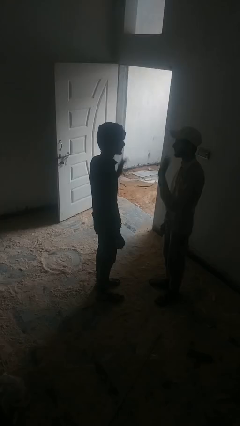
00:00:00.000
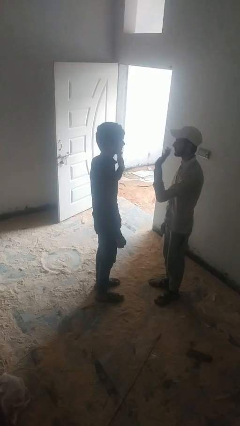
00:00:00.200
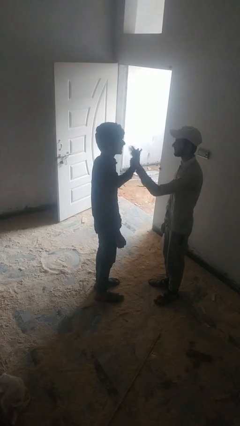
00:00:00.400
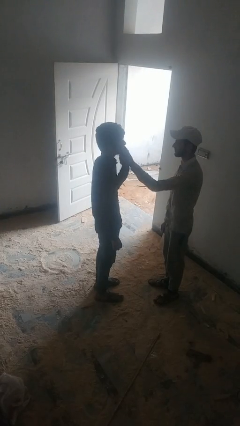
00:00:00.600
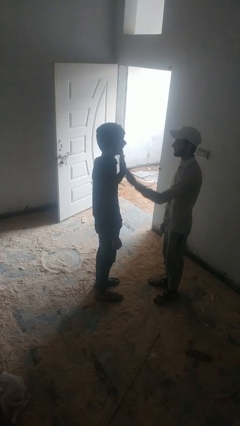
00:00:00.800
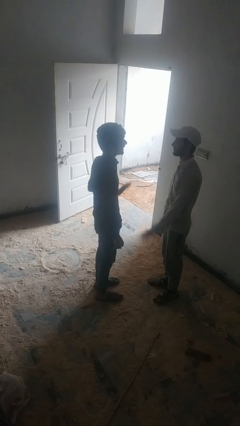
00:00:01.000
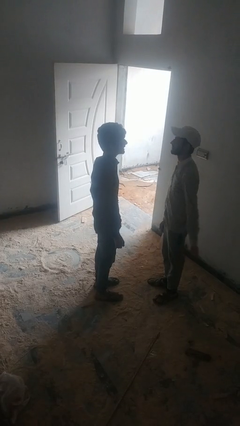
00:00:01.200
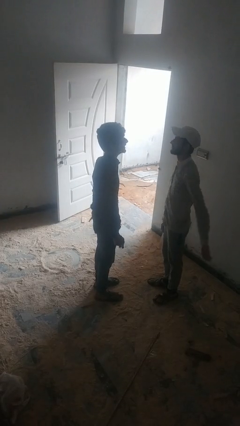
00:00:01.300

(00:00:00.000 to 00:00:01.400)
person highfives hand

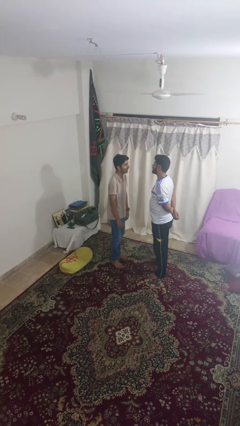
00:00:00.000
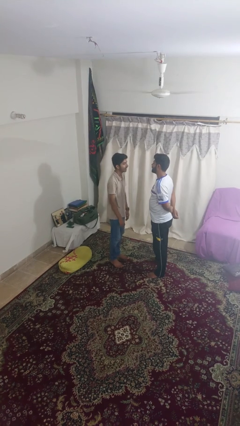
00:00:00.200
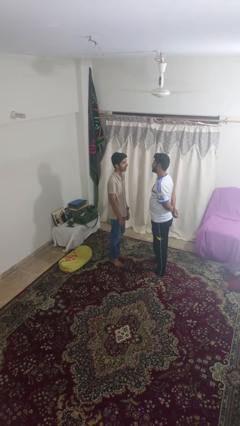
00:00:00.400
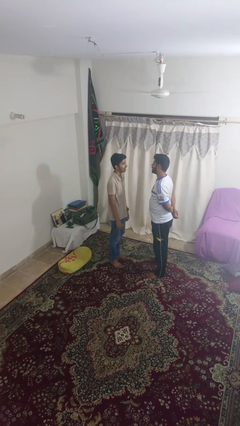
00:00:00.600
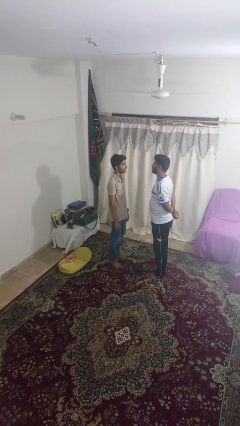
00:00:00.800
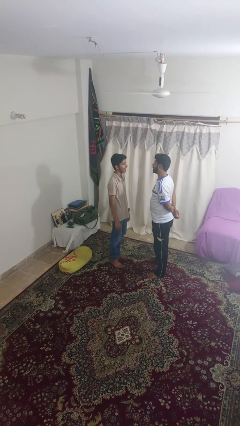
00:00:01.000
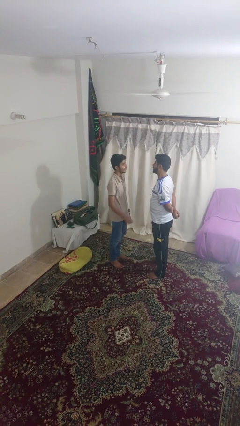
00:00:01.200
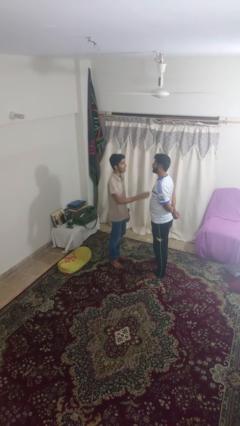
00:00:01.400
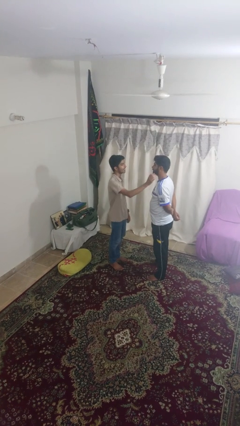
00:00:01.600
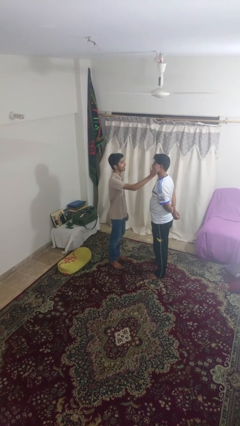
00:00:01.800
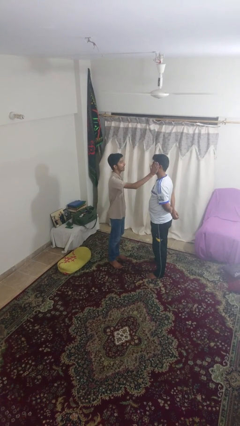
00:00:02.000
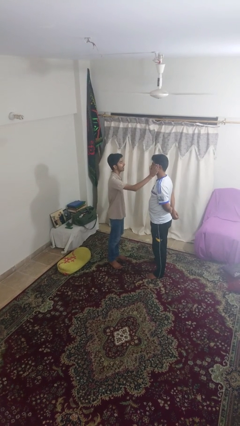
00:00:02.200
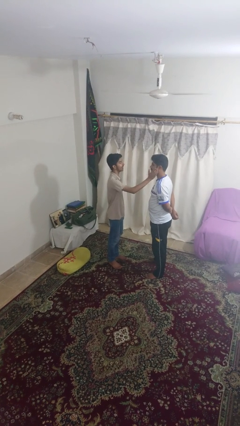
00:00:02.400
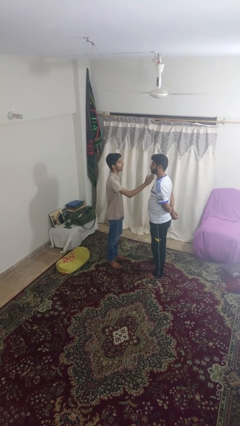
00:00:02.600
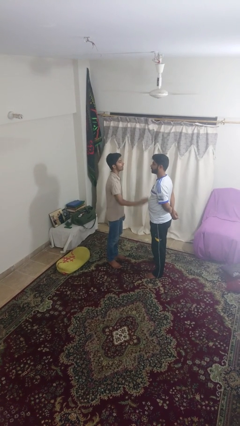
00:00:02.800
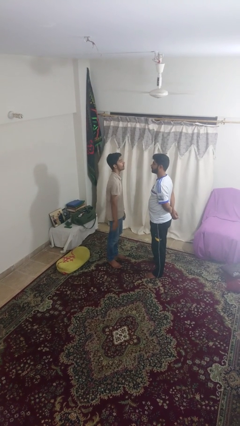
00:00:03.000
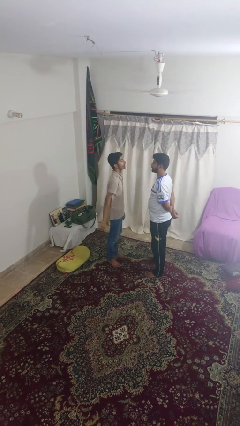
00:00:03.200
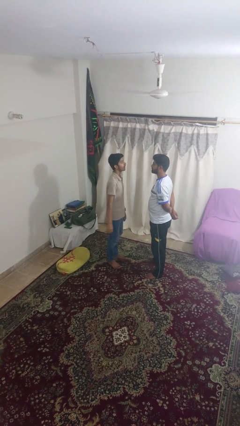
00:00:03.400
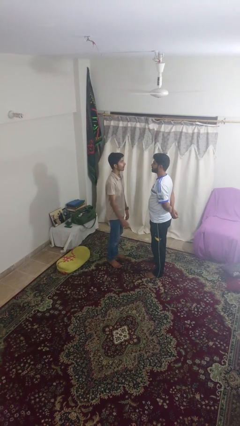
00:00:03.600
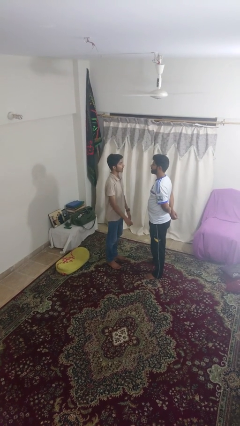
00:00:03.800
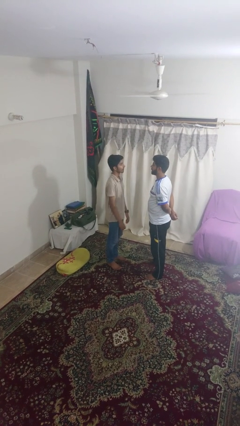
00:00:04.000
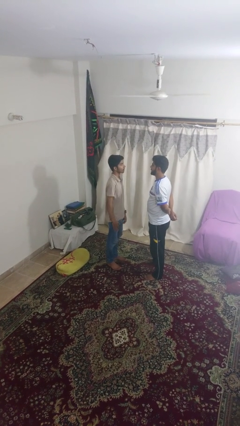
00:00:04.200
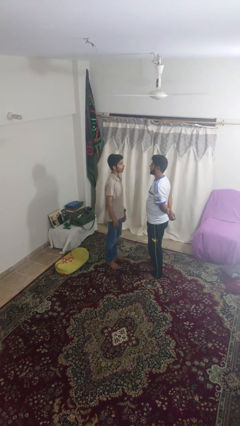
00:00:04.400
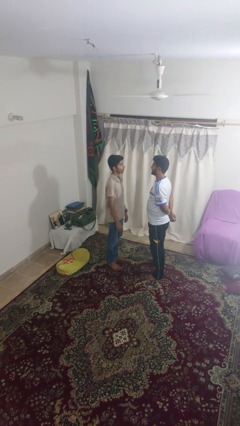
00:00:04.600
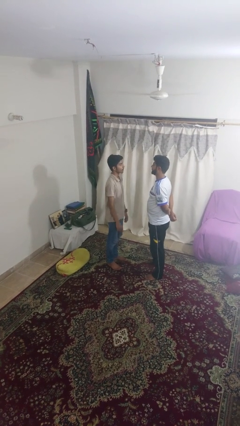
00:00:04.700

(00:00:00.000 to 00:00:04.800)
person touches face of person

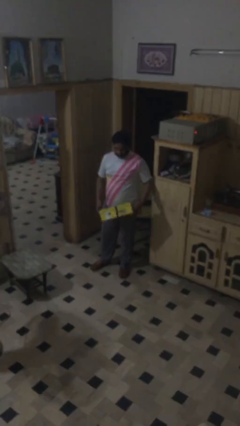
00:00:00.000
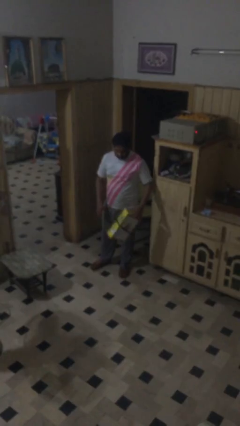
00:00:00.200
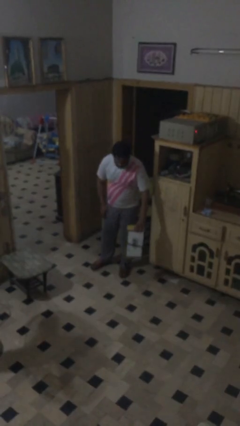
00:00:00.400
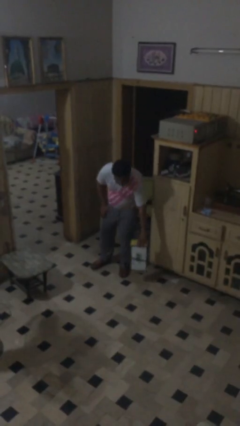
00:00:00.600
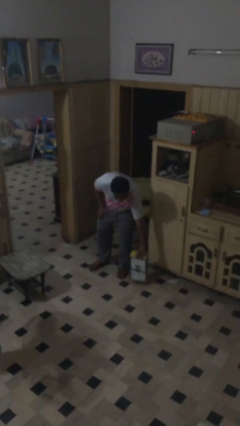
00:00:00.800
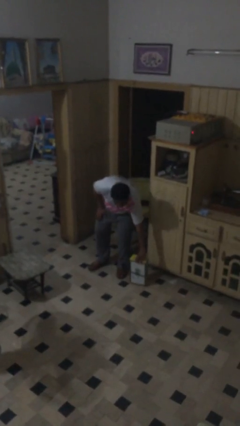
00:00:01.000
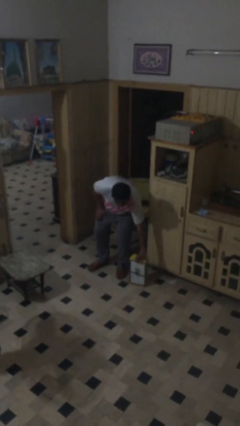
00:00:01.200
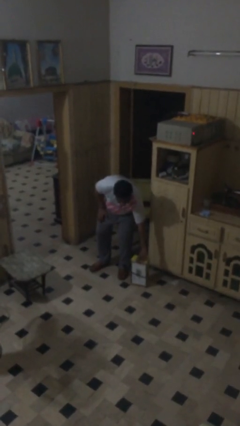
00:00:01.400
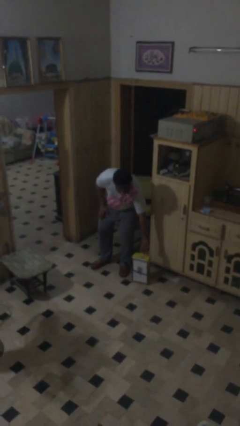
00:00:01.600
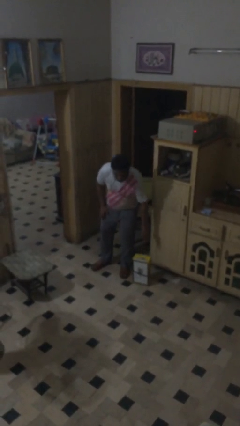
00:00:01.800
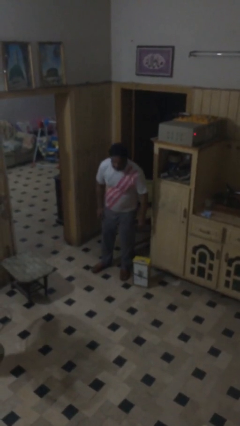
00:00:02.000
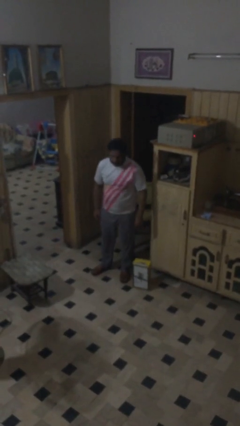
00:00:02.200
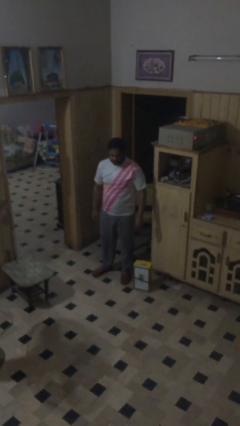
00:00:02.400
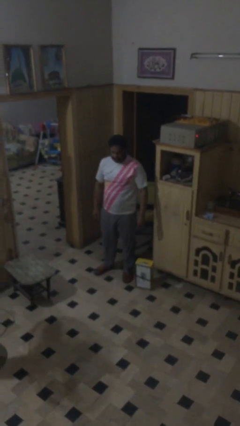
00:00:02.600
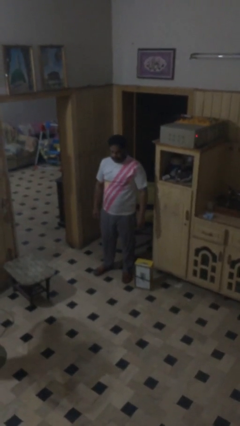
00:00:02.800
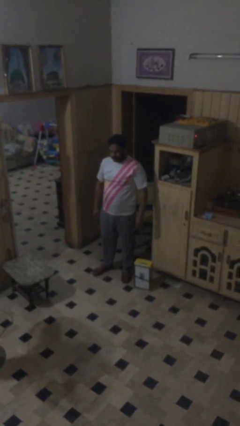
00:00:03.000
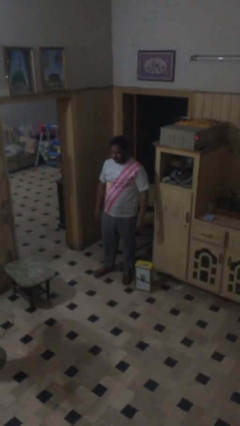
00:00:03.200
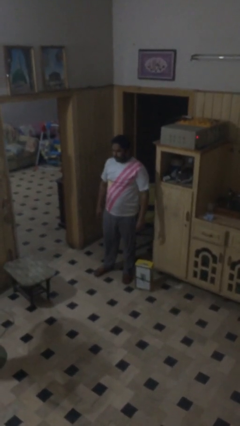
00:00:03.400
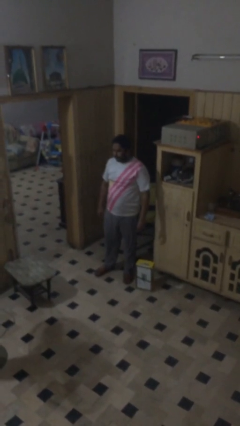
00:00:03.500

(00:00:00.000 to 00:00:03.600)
person puts down object on floor

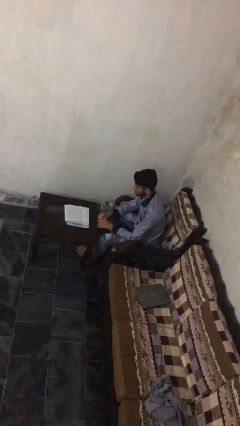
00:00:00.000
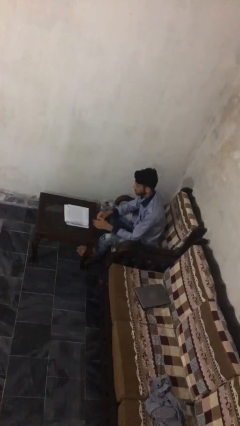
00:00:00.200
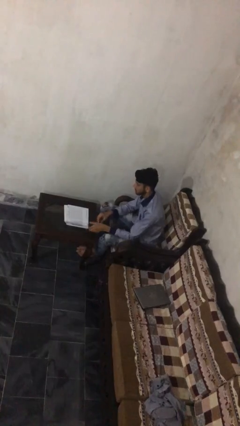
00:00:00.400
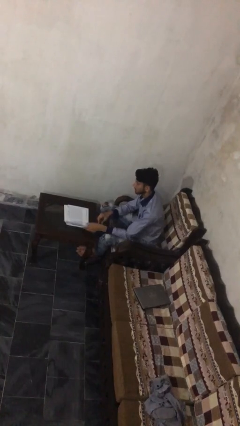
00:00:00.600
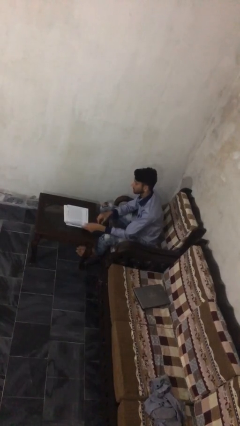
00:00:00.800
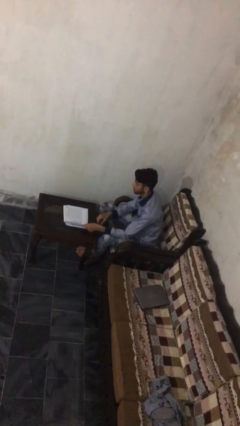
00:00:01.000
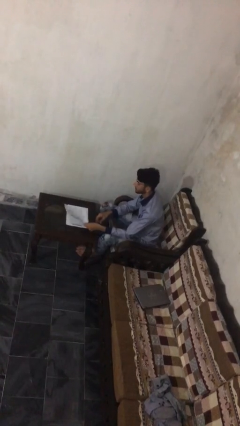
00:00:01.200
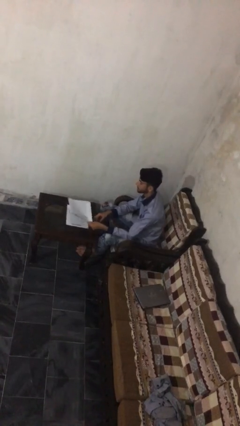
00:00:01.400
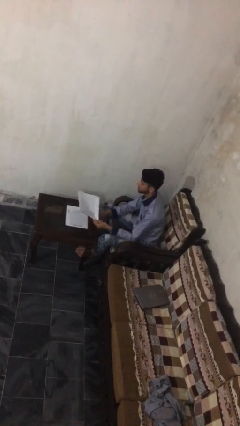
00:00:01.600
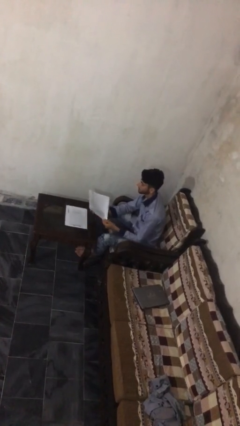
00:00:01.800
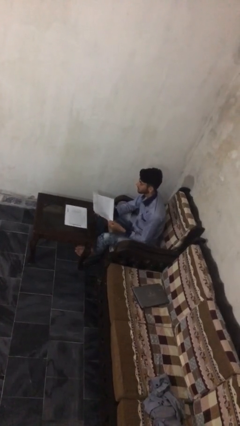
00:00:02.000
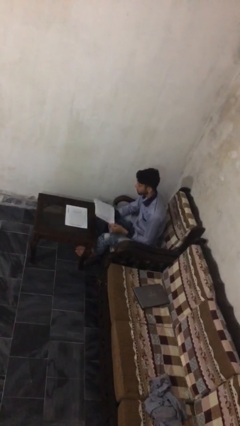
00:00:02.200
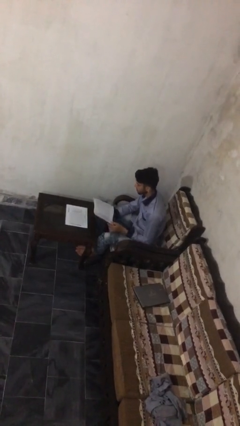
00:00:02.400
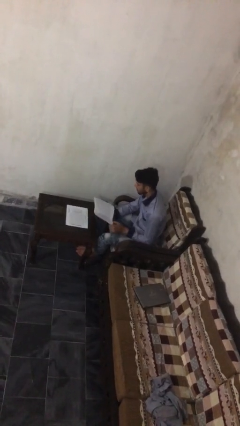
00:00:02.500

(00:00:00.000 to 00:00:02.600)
person picks up object from table

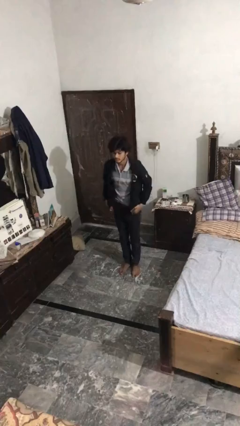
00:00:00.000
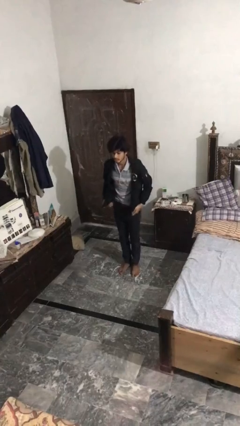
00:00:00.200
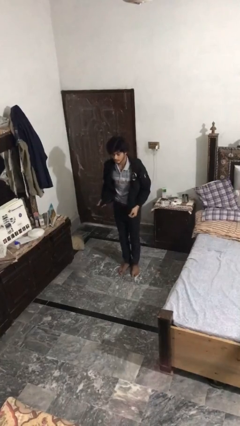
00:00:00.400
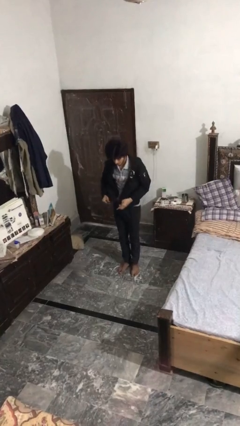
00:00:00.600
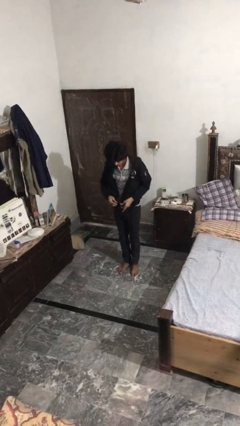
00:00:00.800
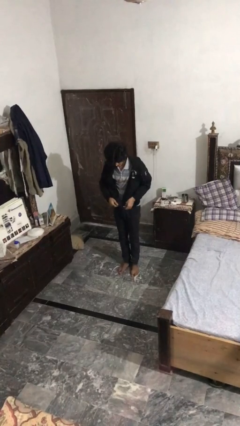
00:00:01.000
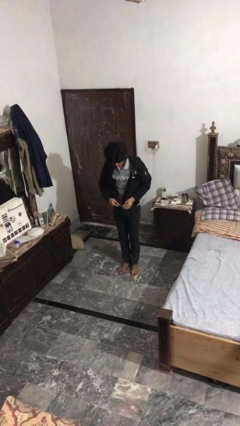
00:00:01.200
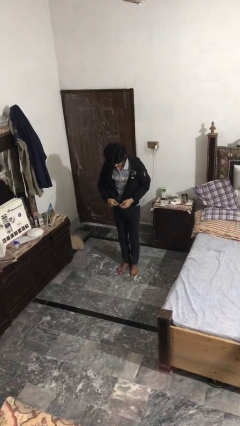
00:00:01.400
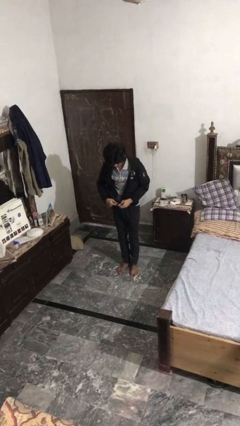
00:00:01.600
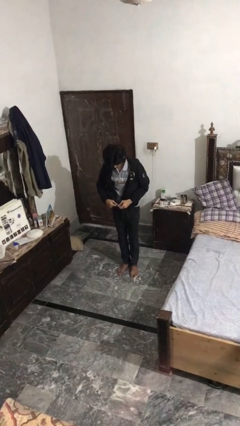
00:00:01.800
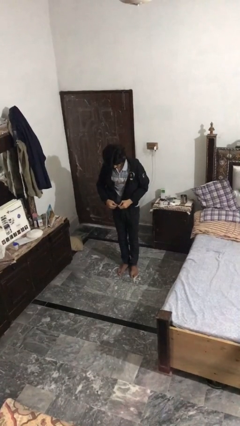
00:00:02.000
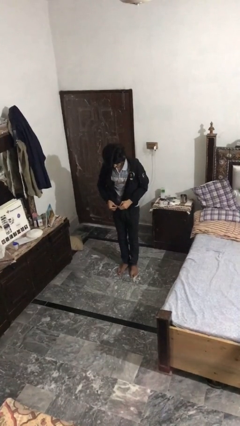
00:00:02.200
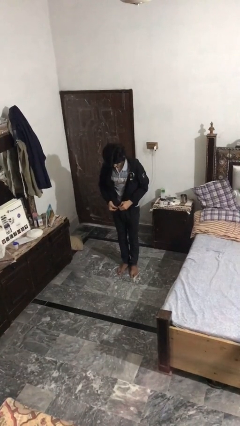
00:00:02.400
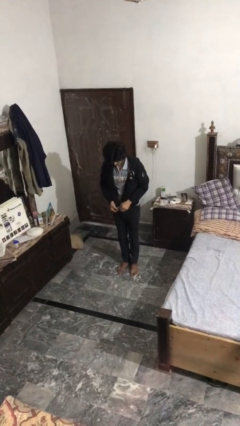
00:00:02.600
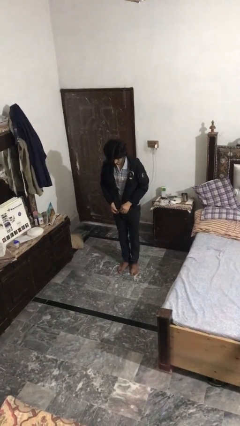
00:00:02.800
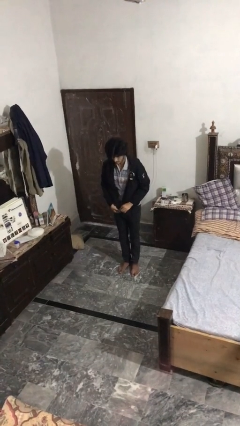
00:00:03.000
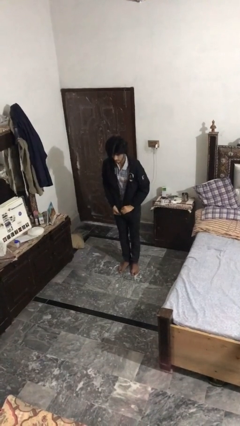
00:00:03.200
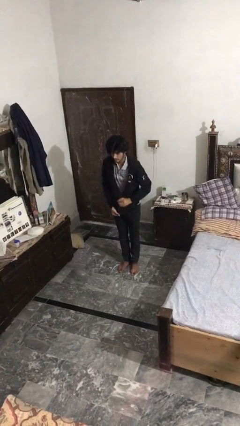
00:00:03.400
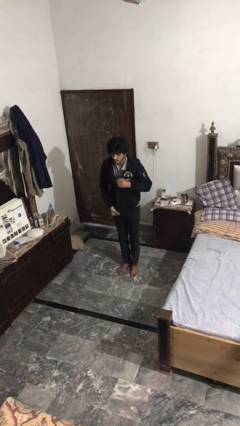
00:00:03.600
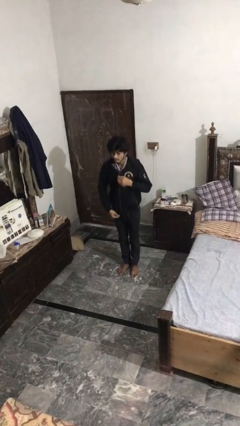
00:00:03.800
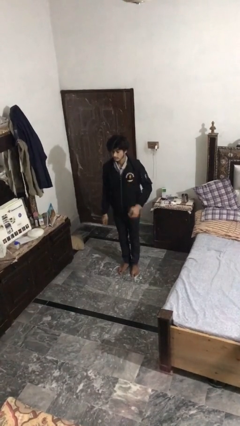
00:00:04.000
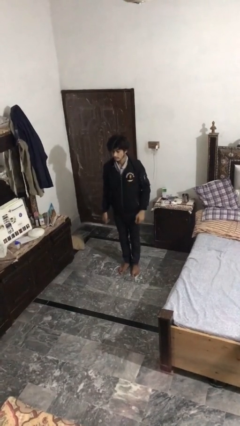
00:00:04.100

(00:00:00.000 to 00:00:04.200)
person zips up jacket

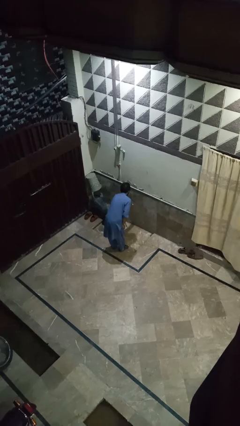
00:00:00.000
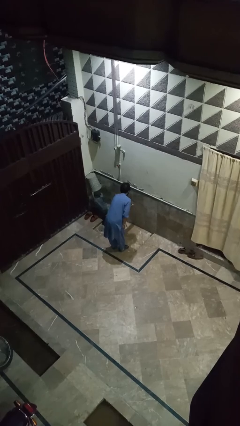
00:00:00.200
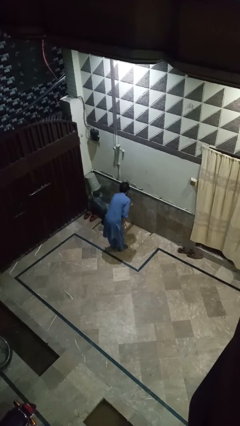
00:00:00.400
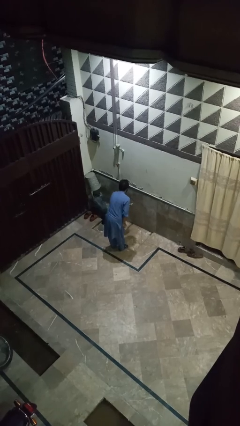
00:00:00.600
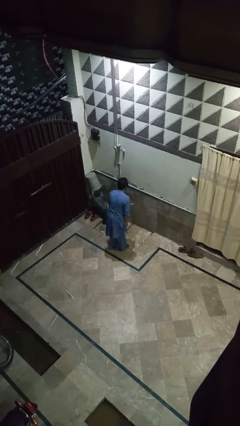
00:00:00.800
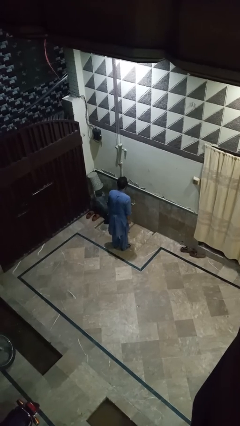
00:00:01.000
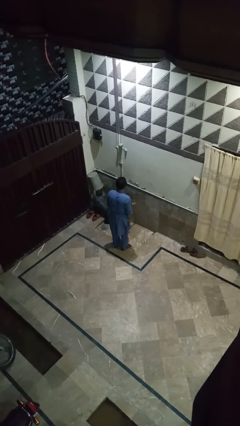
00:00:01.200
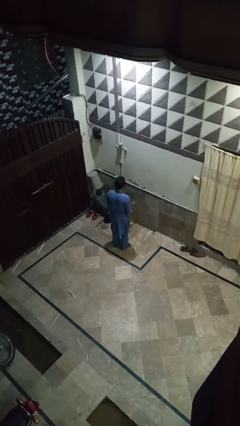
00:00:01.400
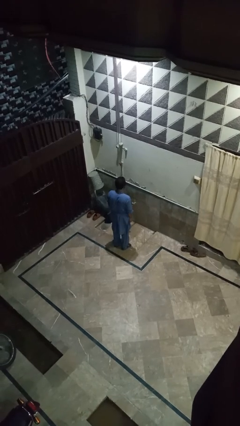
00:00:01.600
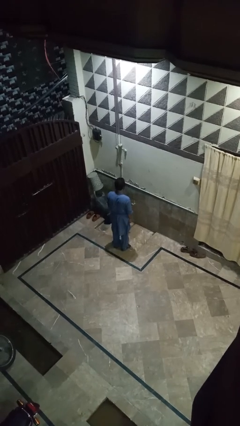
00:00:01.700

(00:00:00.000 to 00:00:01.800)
person turns off faucet
